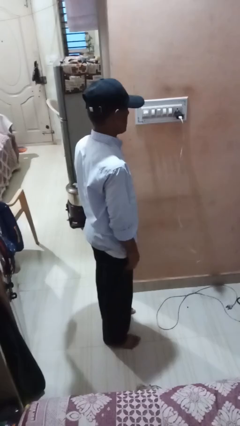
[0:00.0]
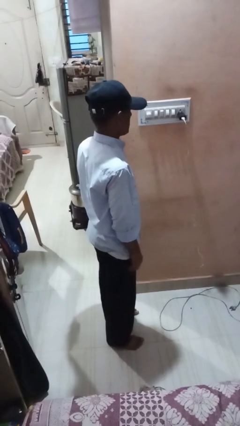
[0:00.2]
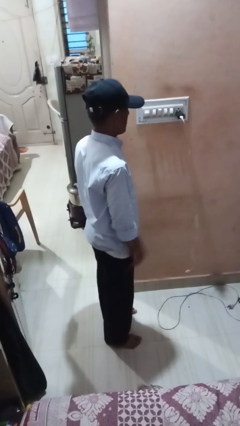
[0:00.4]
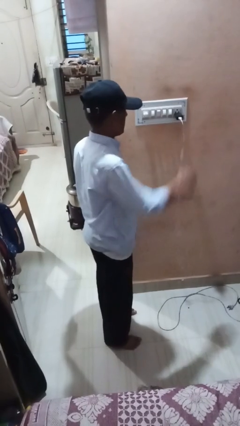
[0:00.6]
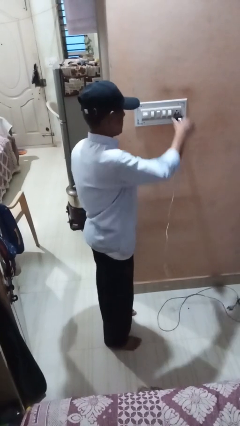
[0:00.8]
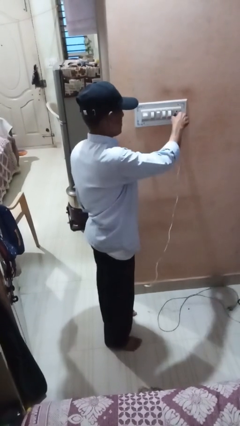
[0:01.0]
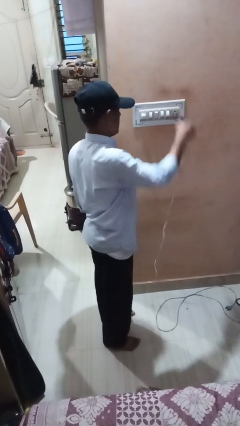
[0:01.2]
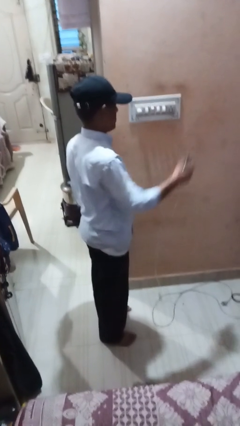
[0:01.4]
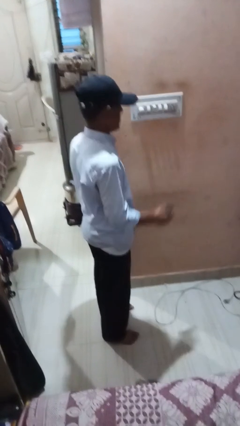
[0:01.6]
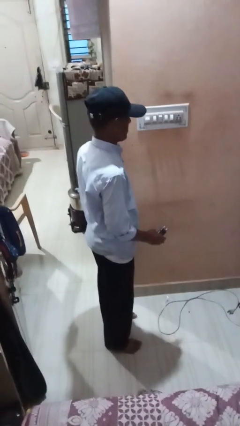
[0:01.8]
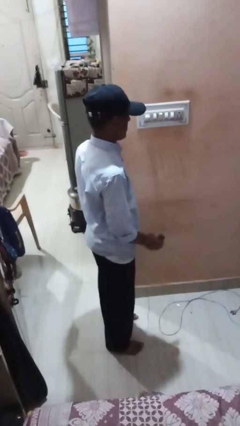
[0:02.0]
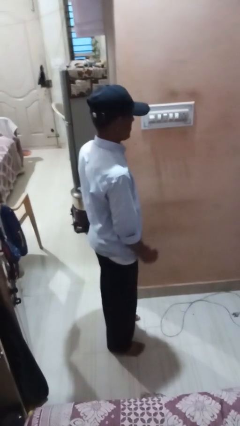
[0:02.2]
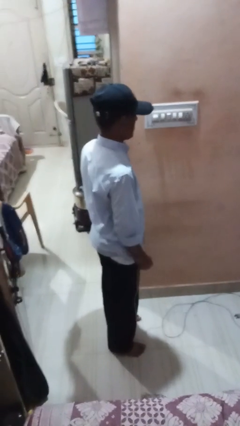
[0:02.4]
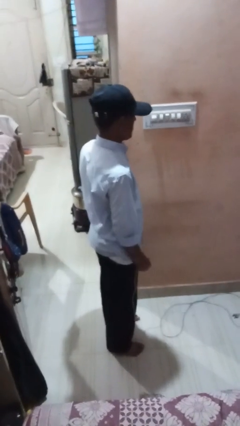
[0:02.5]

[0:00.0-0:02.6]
person unplugs from electrical socket

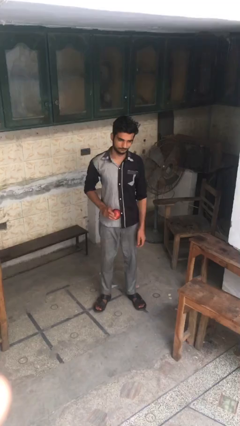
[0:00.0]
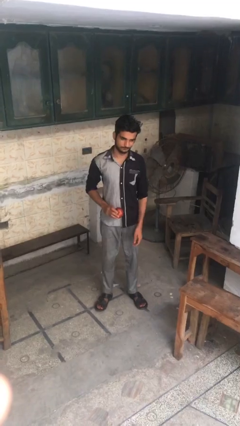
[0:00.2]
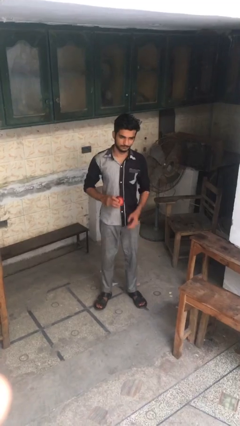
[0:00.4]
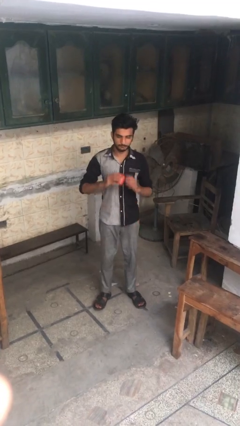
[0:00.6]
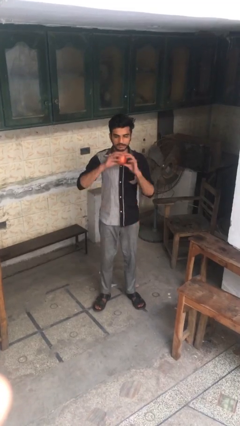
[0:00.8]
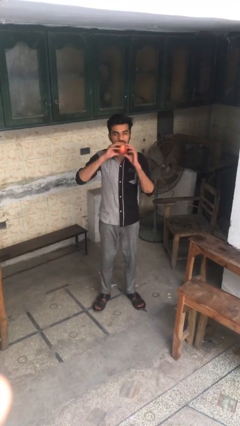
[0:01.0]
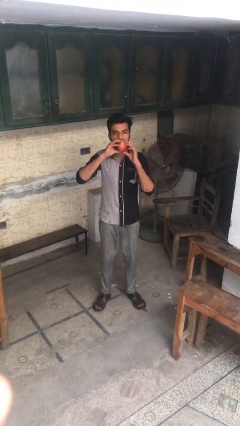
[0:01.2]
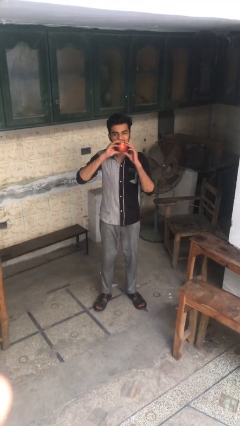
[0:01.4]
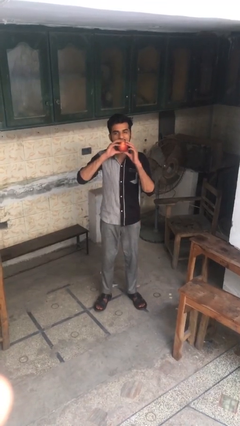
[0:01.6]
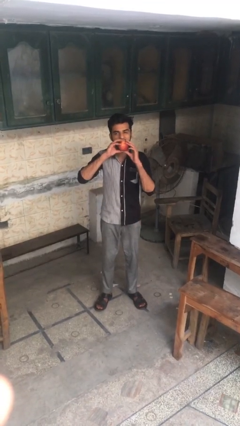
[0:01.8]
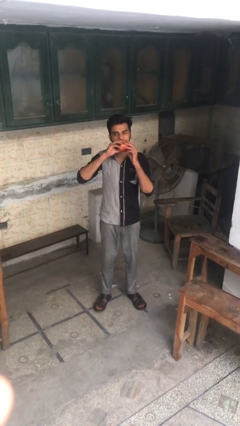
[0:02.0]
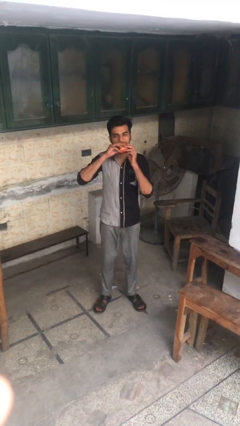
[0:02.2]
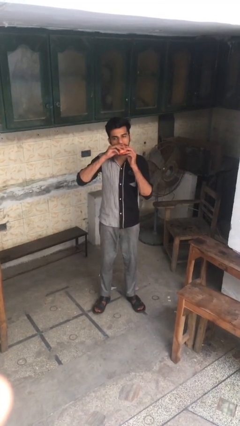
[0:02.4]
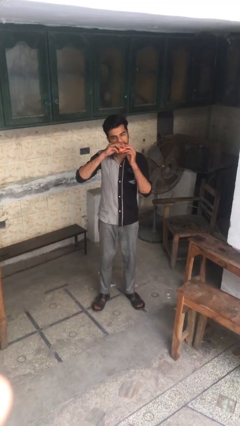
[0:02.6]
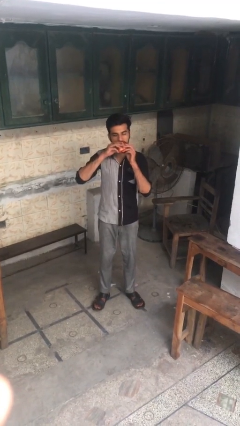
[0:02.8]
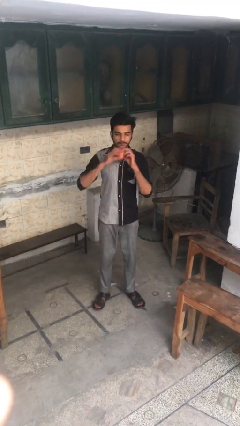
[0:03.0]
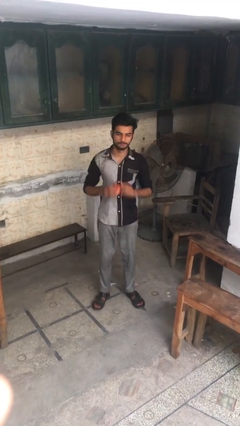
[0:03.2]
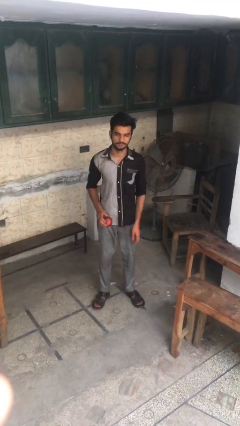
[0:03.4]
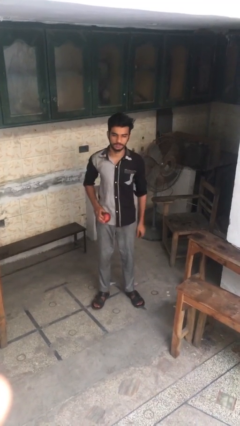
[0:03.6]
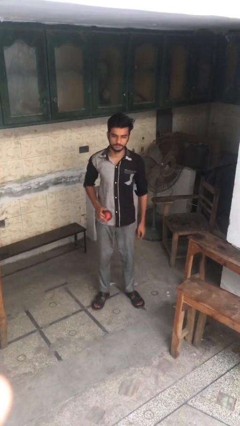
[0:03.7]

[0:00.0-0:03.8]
person eats apple

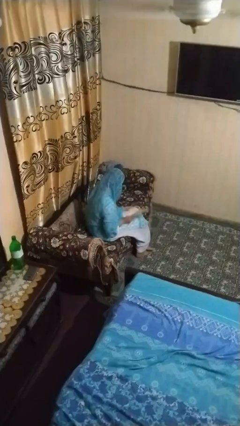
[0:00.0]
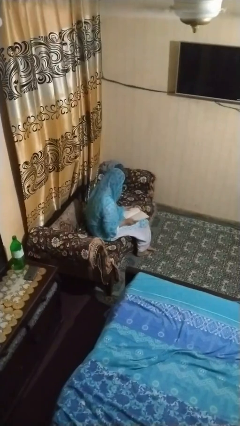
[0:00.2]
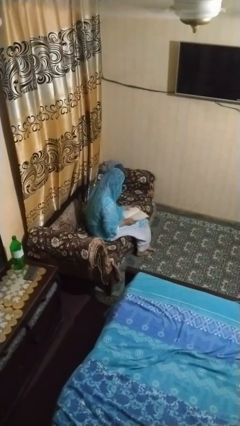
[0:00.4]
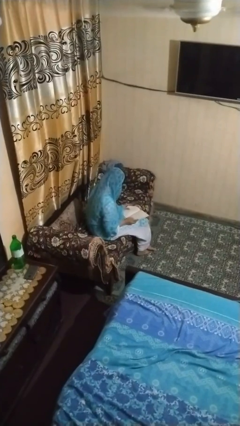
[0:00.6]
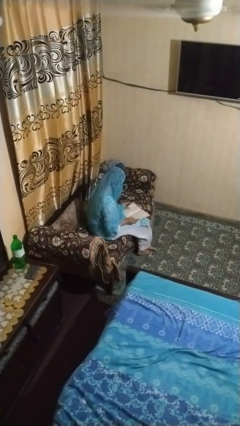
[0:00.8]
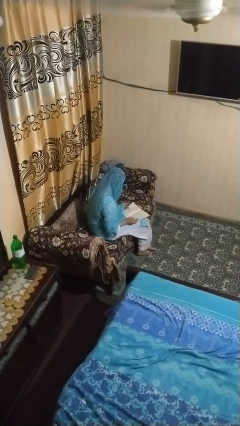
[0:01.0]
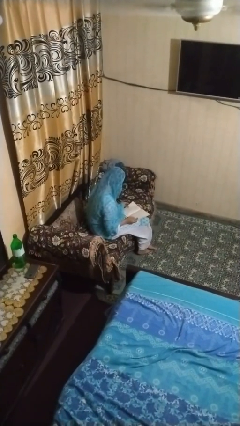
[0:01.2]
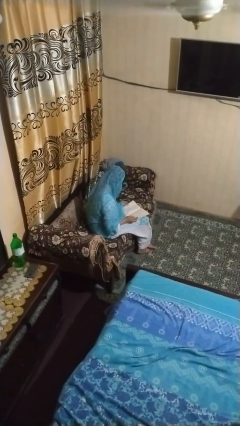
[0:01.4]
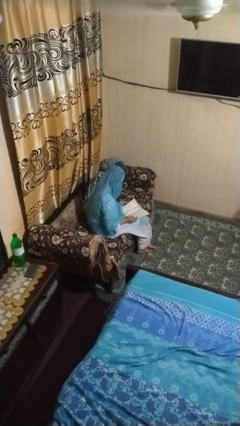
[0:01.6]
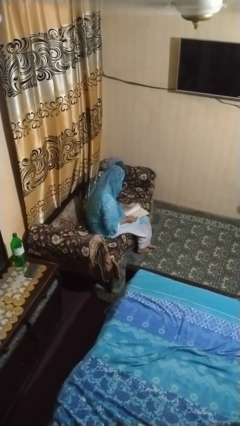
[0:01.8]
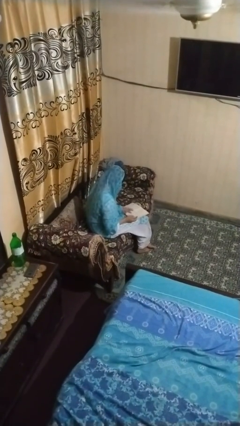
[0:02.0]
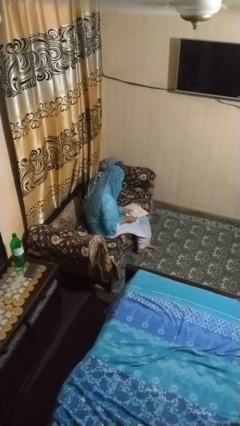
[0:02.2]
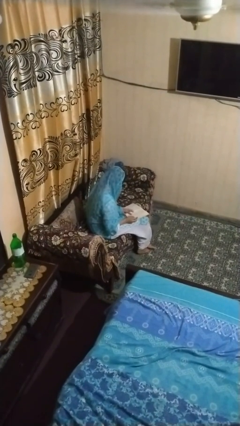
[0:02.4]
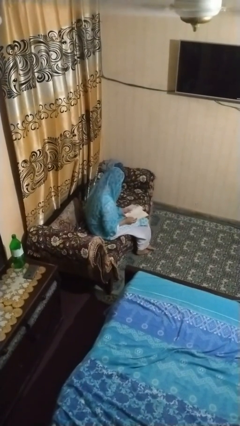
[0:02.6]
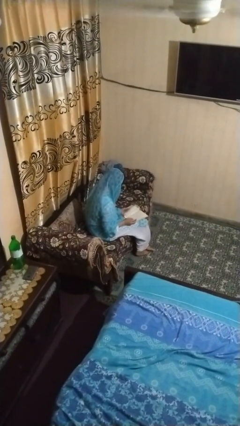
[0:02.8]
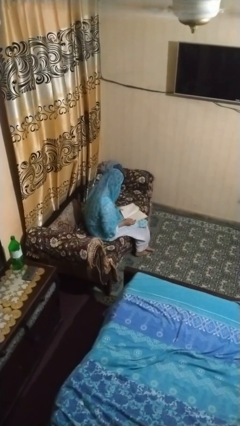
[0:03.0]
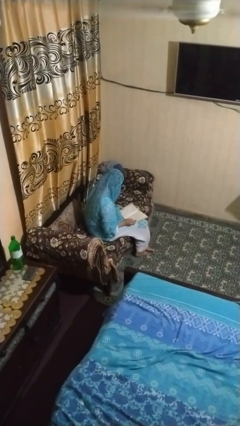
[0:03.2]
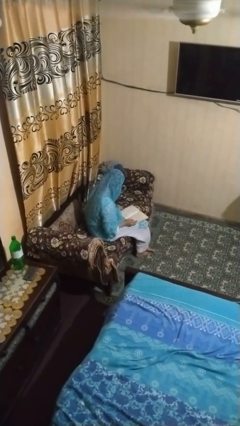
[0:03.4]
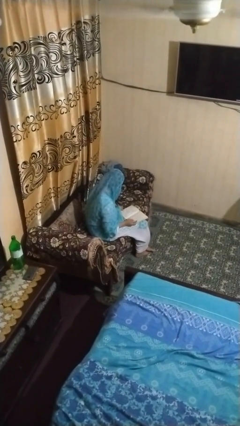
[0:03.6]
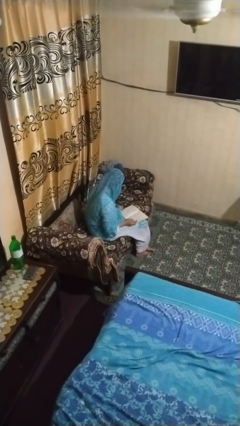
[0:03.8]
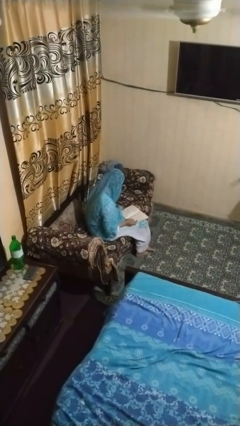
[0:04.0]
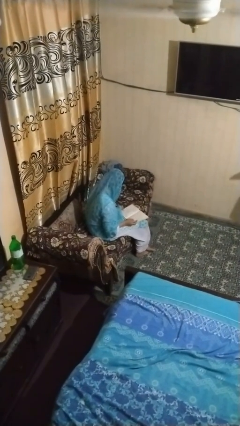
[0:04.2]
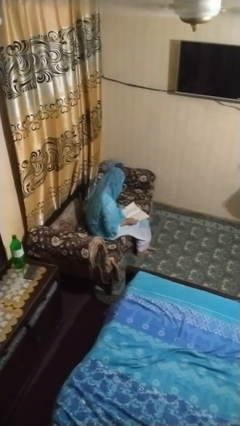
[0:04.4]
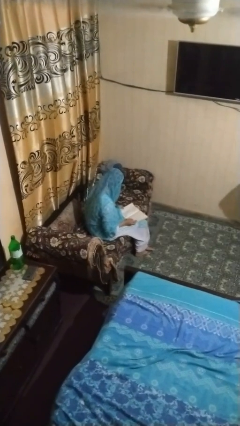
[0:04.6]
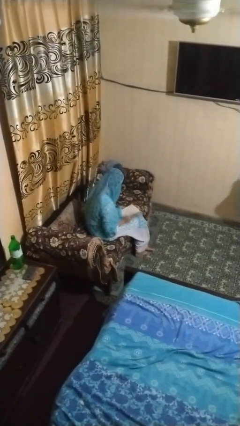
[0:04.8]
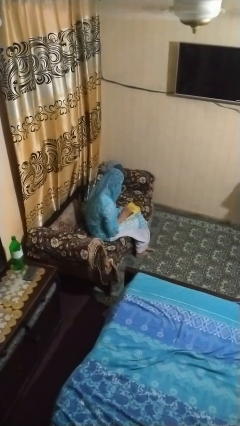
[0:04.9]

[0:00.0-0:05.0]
person reads book

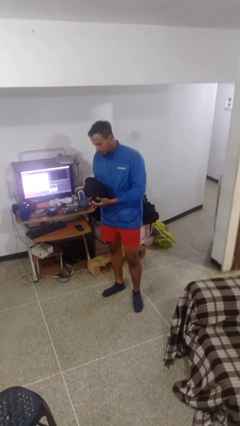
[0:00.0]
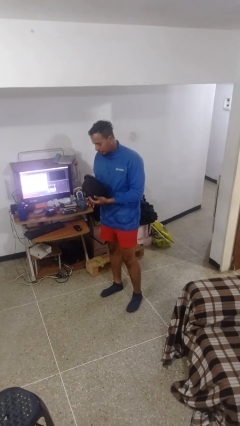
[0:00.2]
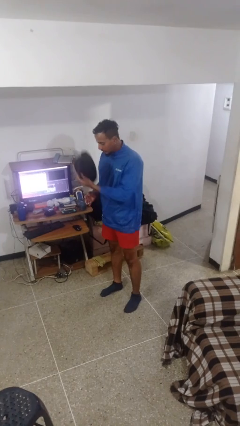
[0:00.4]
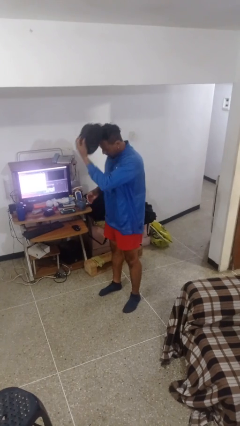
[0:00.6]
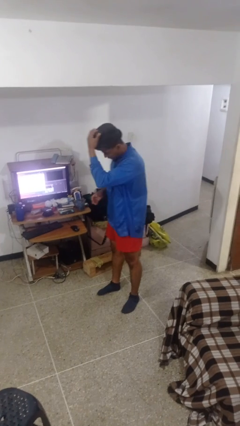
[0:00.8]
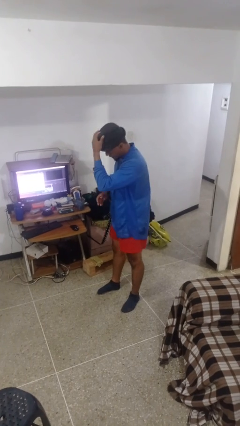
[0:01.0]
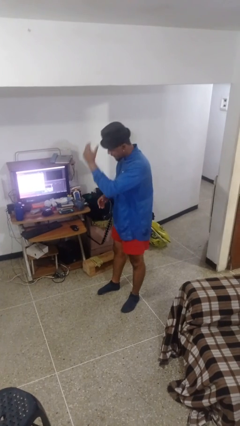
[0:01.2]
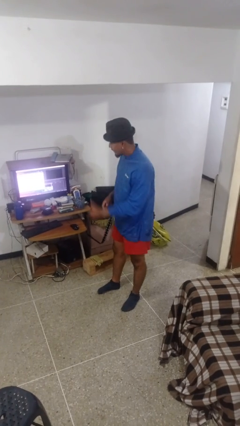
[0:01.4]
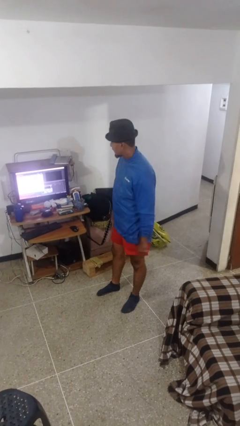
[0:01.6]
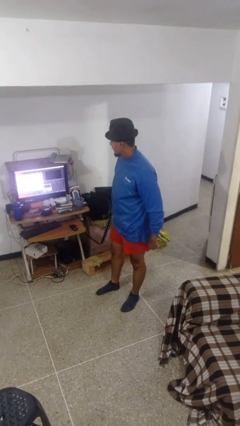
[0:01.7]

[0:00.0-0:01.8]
person puts on hat

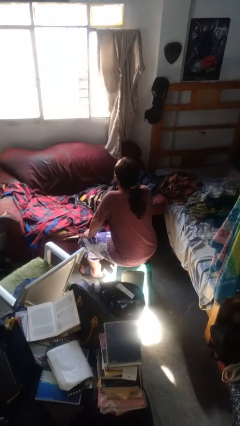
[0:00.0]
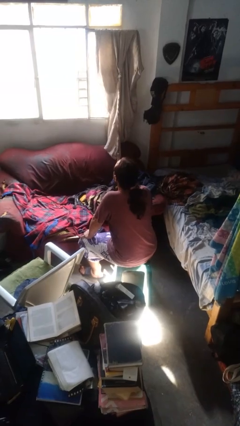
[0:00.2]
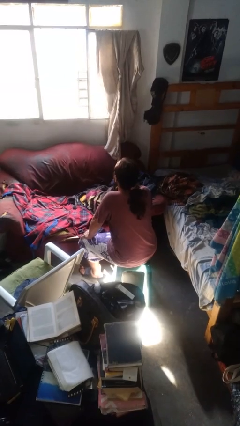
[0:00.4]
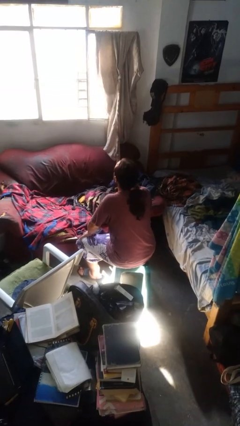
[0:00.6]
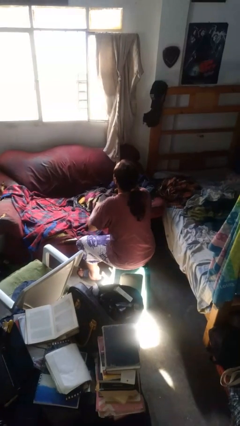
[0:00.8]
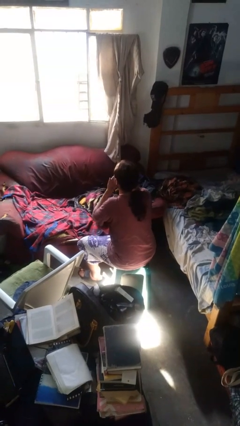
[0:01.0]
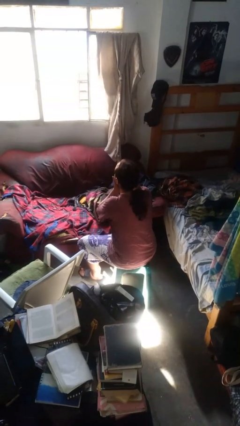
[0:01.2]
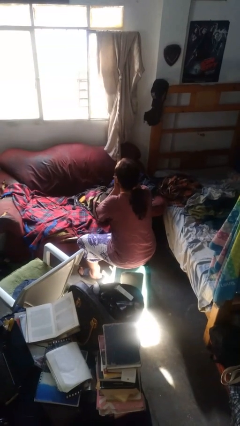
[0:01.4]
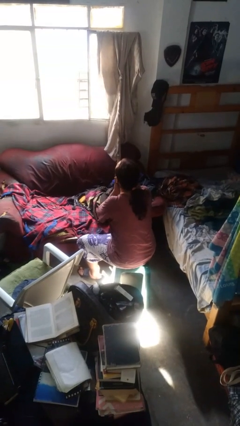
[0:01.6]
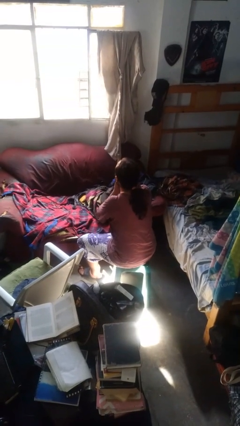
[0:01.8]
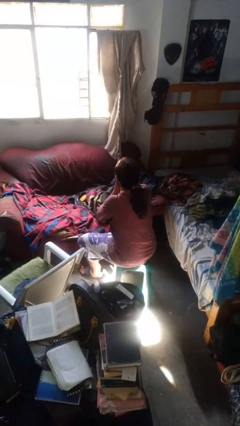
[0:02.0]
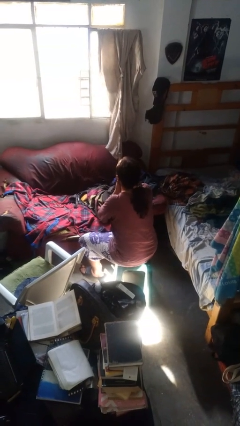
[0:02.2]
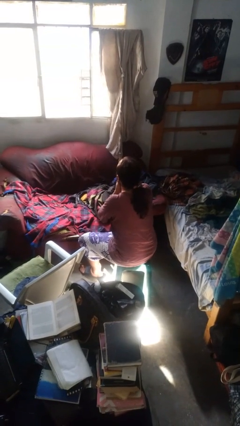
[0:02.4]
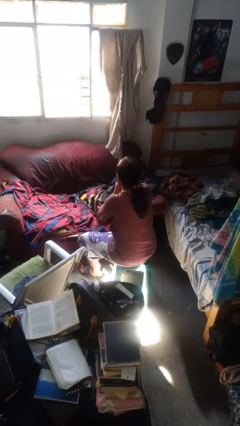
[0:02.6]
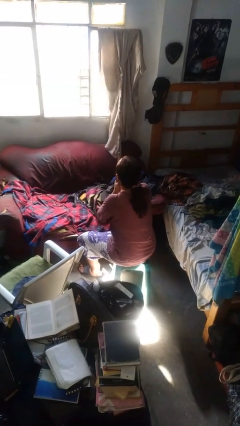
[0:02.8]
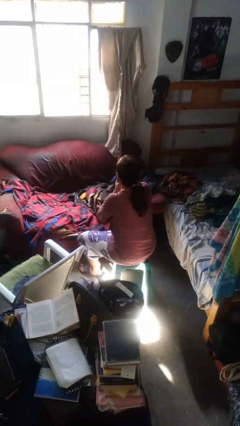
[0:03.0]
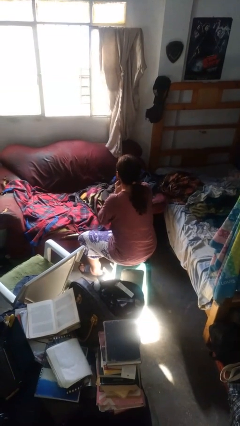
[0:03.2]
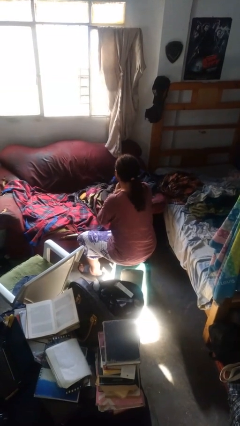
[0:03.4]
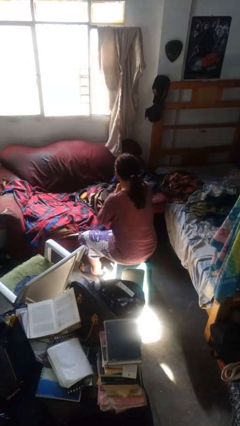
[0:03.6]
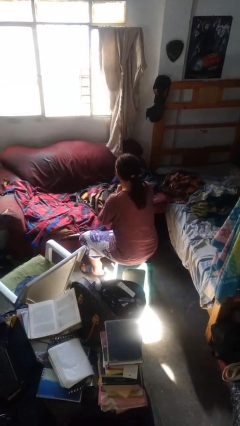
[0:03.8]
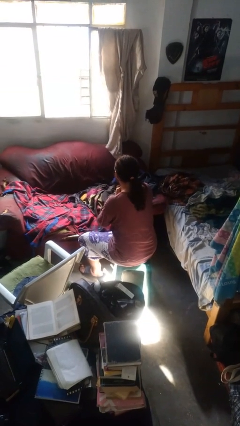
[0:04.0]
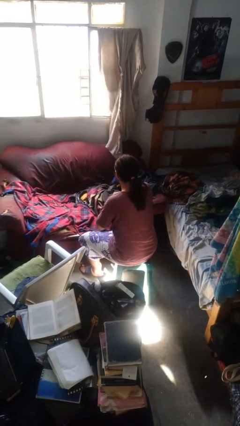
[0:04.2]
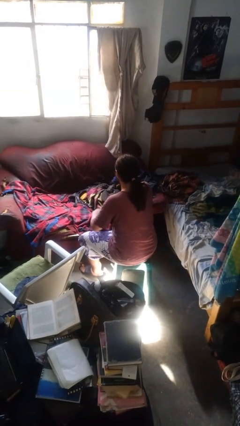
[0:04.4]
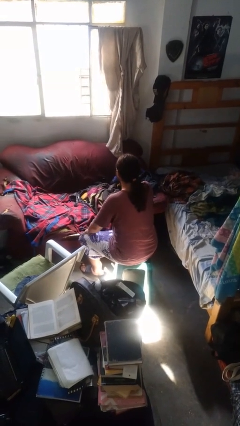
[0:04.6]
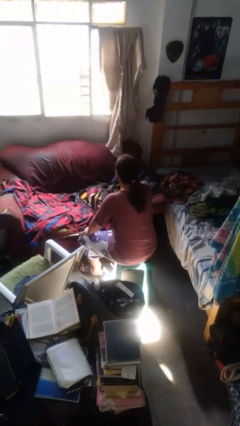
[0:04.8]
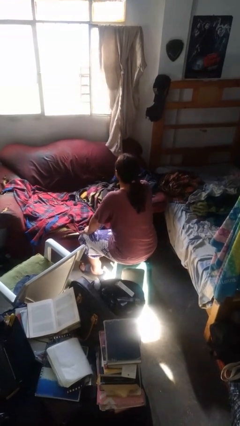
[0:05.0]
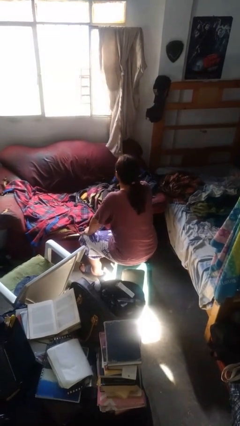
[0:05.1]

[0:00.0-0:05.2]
person strokes chin
